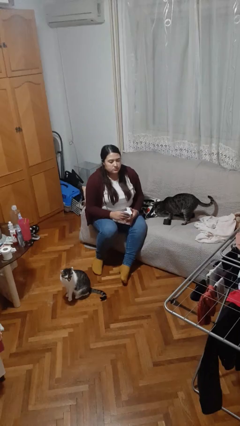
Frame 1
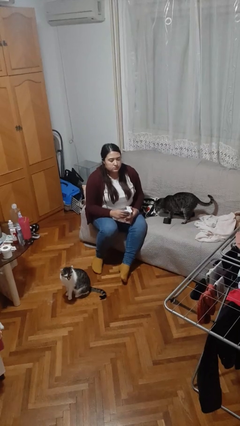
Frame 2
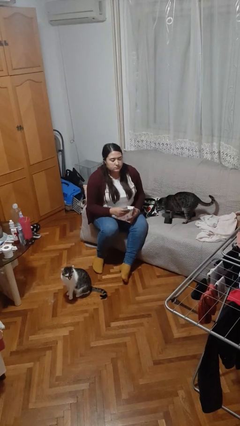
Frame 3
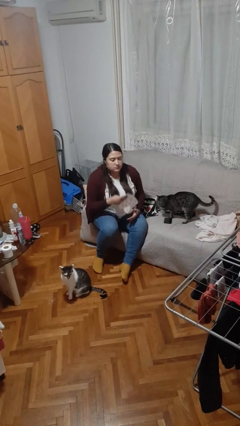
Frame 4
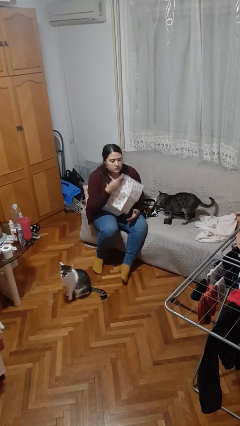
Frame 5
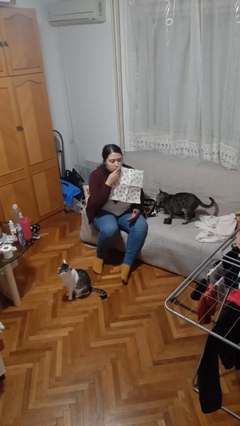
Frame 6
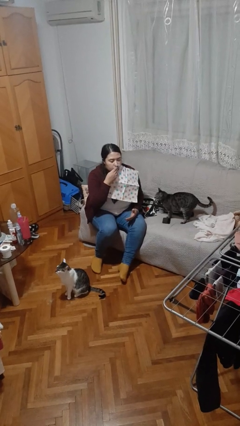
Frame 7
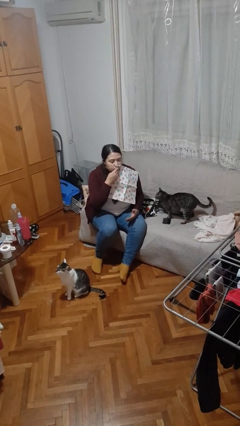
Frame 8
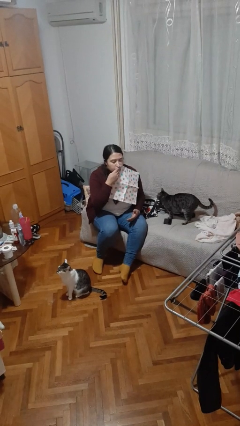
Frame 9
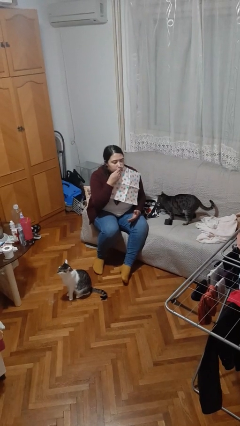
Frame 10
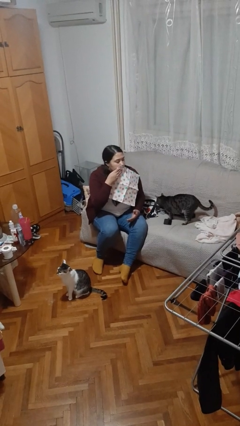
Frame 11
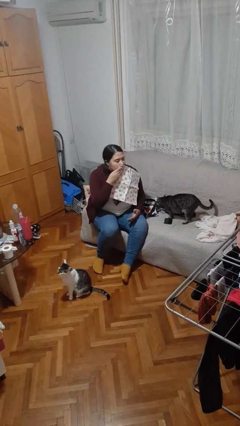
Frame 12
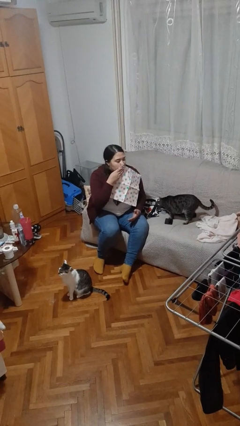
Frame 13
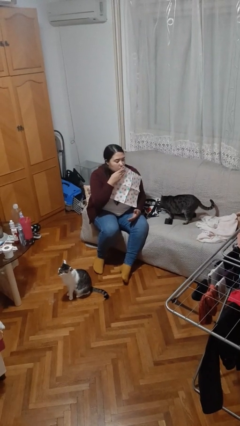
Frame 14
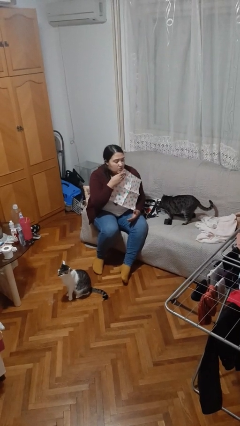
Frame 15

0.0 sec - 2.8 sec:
person wipes mouth with napkin

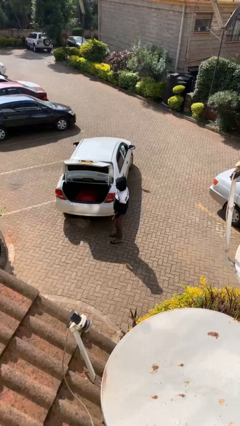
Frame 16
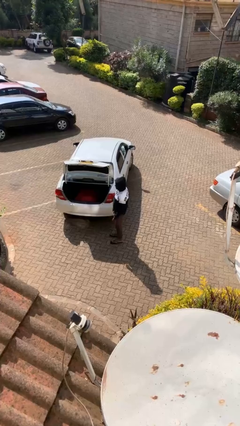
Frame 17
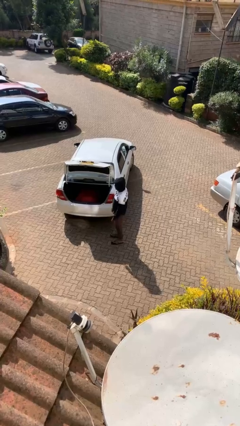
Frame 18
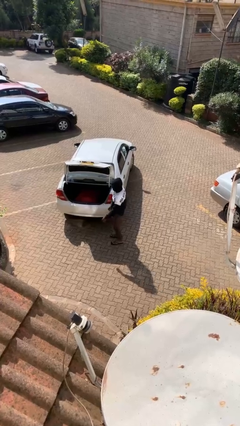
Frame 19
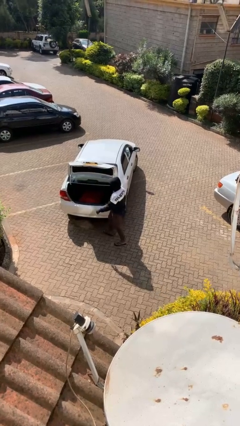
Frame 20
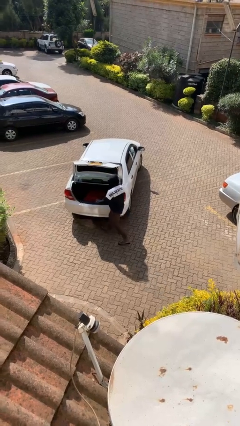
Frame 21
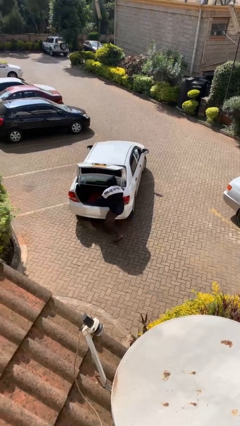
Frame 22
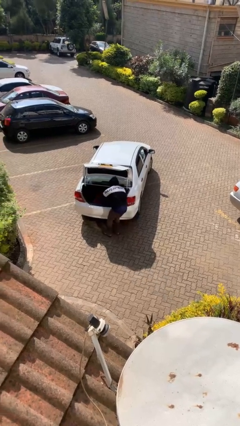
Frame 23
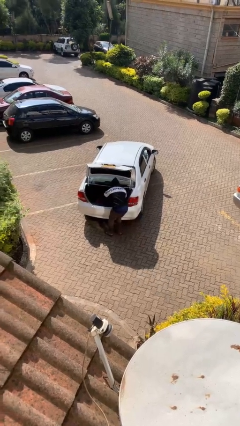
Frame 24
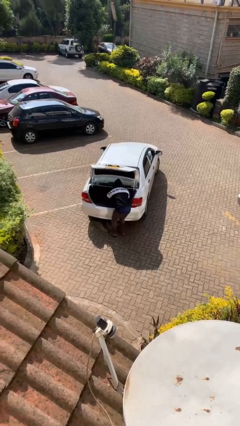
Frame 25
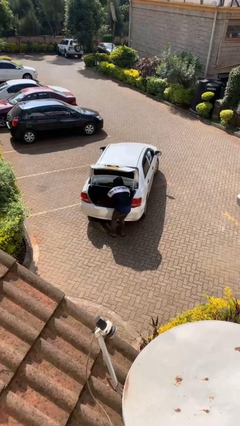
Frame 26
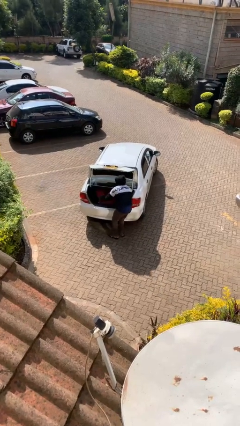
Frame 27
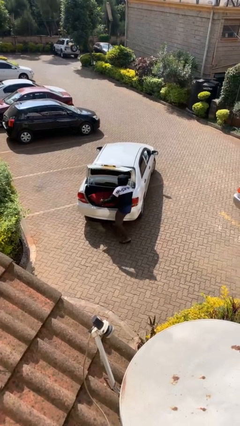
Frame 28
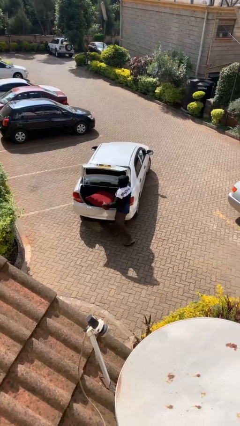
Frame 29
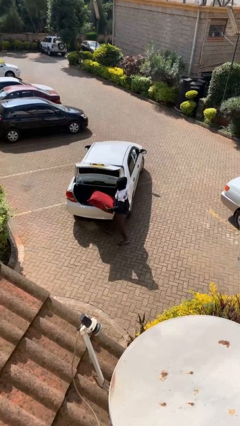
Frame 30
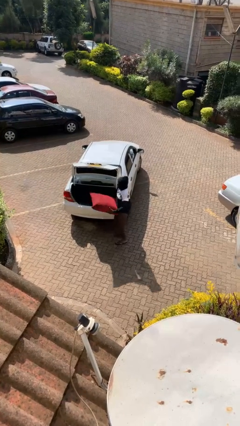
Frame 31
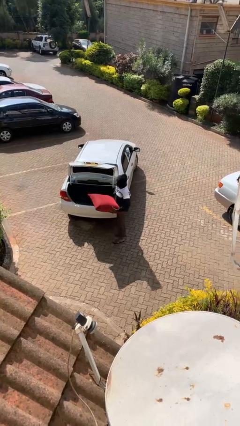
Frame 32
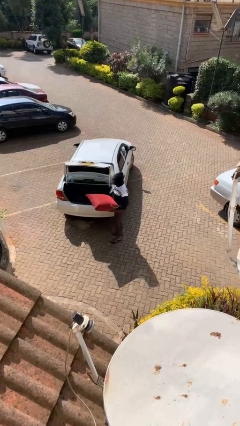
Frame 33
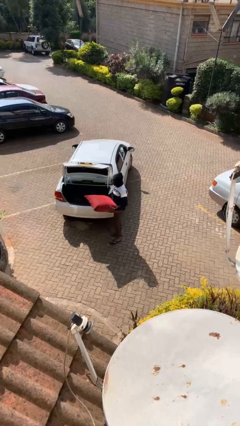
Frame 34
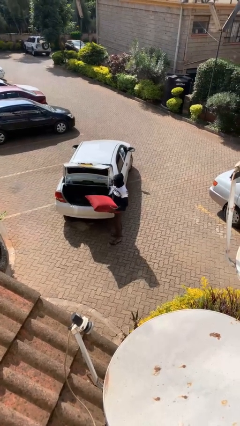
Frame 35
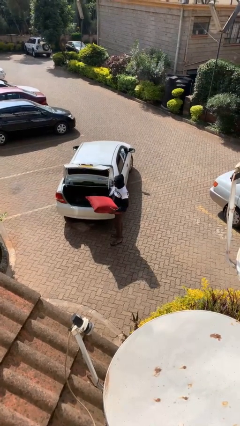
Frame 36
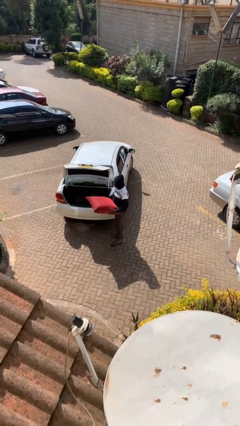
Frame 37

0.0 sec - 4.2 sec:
person unloads car

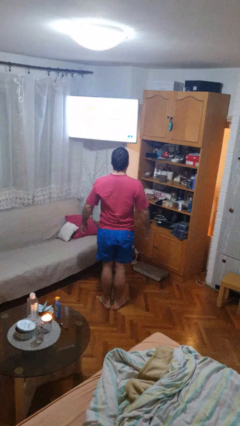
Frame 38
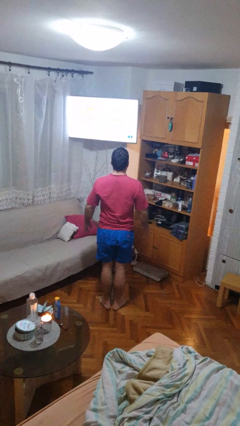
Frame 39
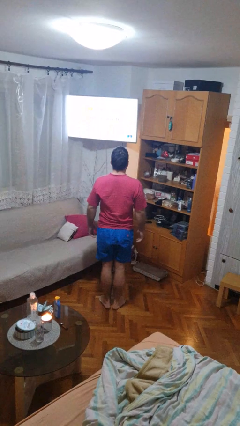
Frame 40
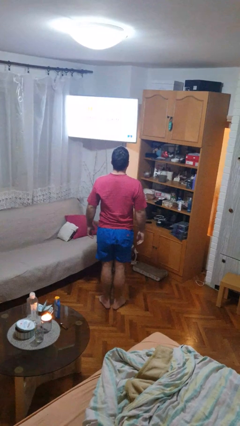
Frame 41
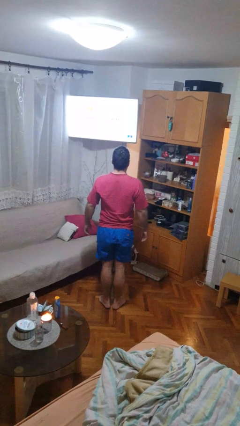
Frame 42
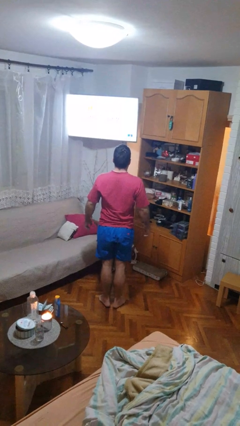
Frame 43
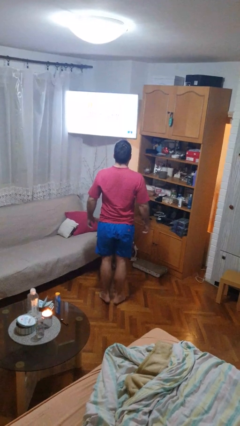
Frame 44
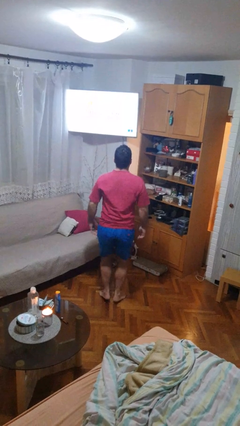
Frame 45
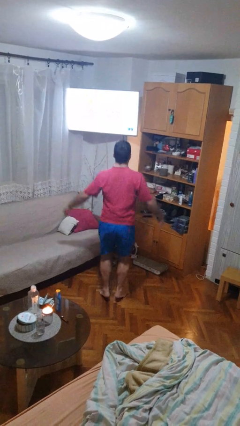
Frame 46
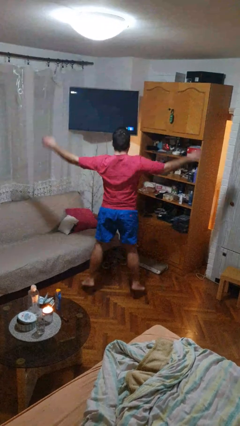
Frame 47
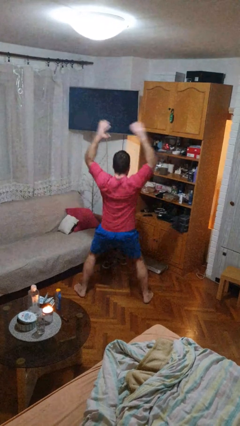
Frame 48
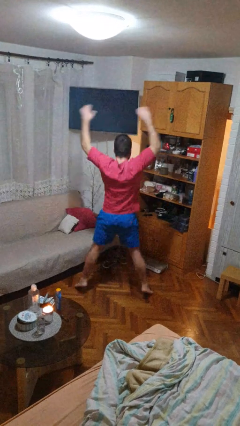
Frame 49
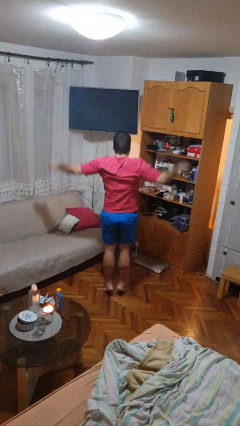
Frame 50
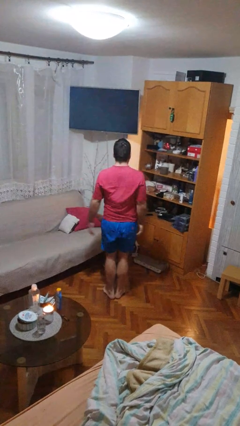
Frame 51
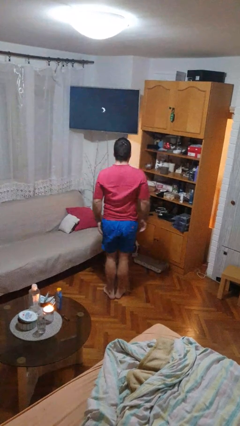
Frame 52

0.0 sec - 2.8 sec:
person exercises with jumping jacks

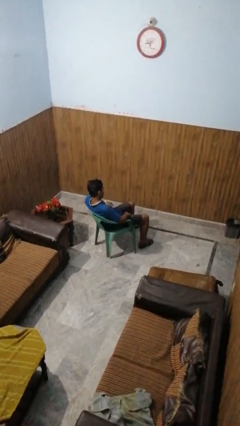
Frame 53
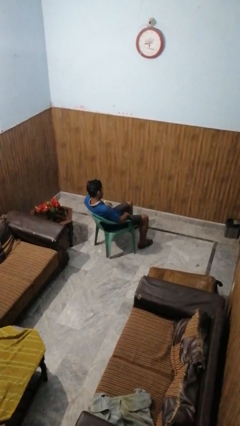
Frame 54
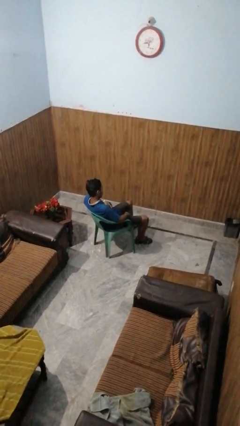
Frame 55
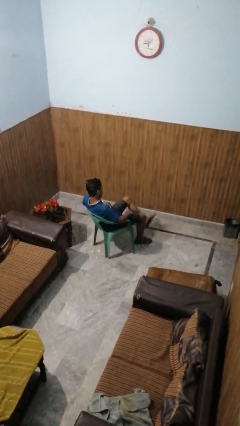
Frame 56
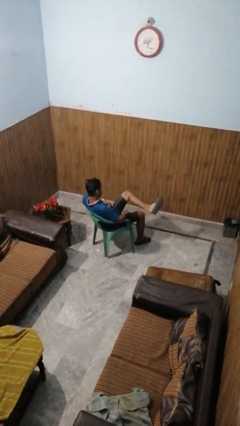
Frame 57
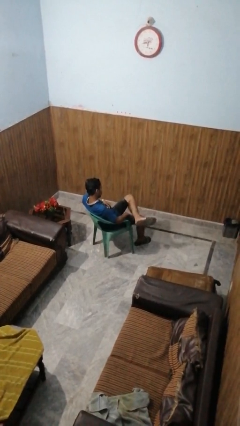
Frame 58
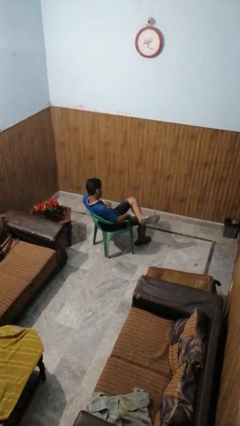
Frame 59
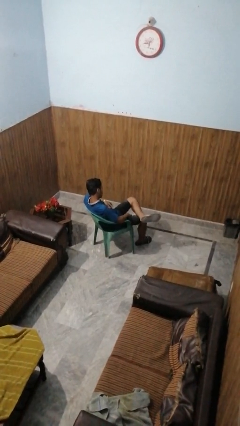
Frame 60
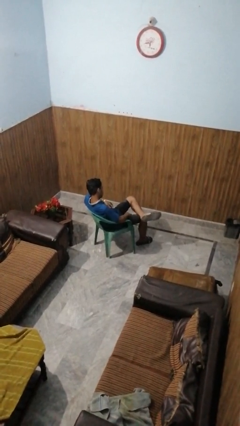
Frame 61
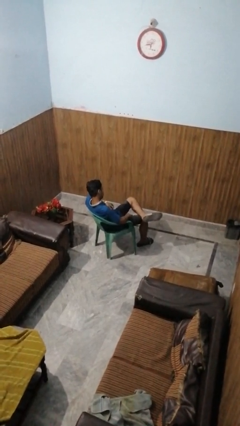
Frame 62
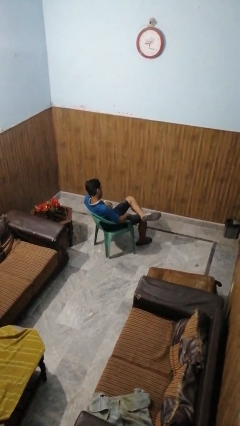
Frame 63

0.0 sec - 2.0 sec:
person crosses legs

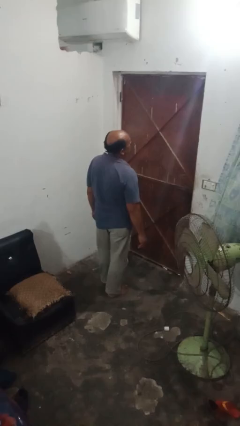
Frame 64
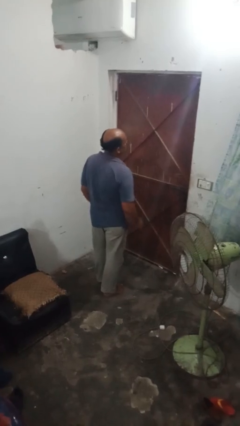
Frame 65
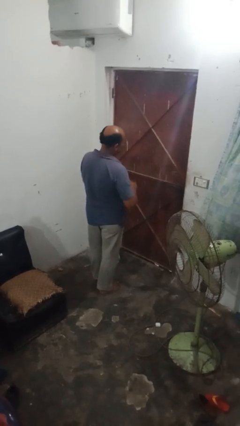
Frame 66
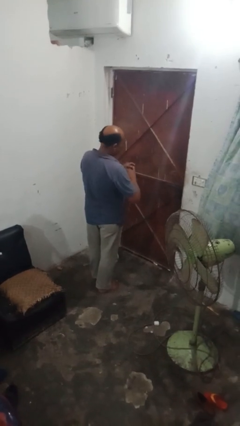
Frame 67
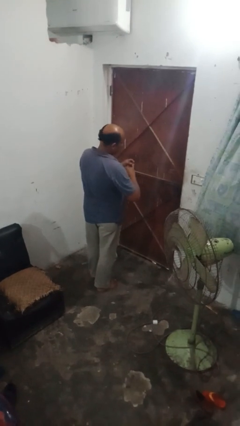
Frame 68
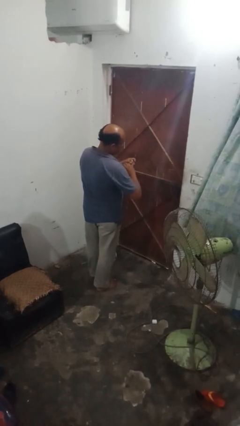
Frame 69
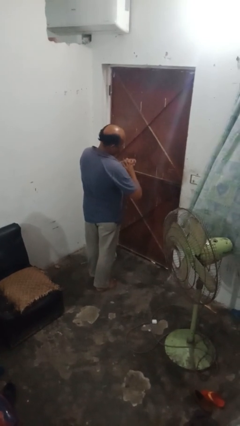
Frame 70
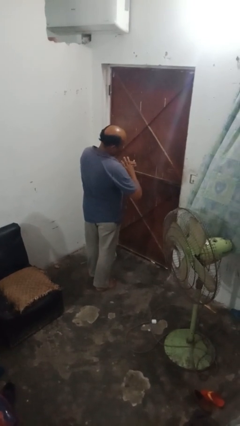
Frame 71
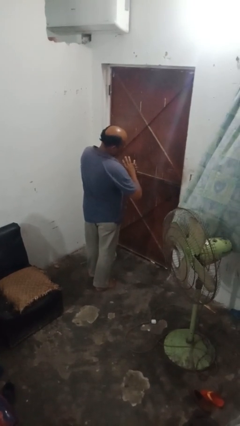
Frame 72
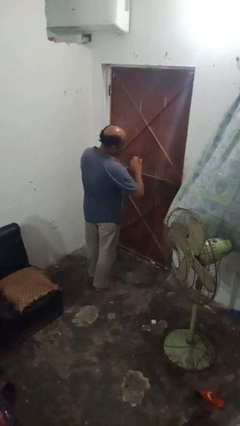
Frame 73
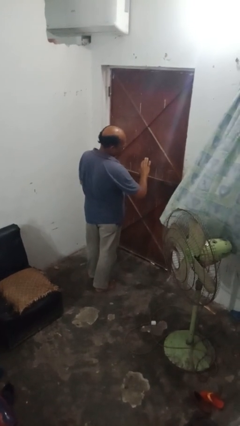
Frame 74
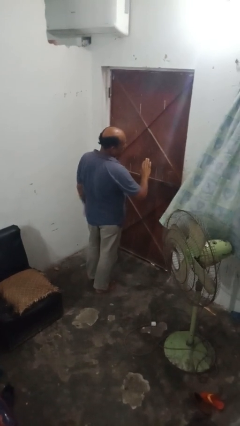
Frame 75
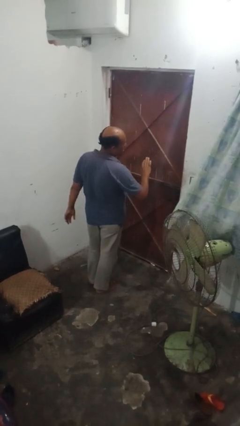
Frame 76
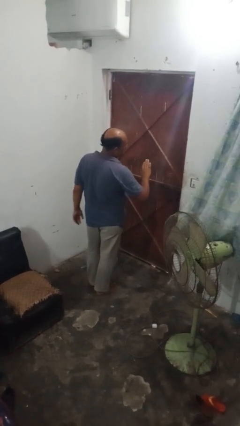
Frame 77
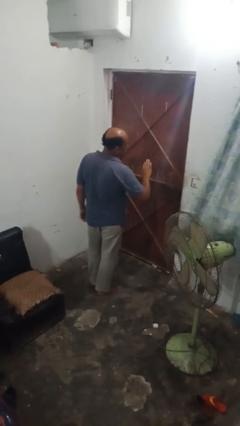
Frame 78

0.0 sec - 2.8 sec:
person puts on ring

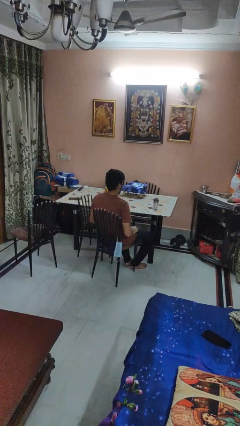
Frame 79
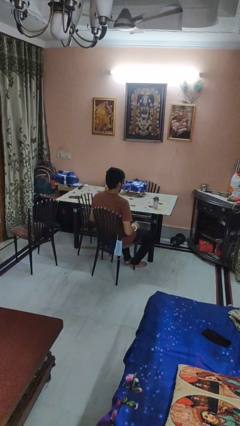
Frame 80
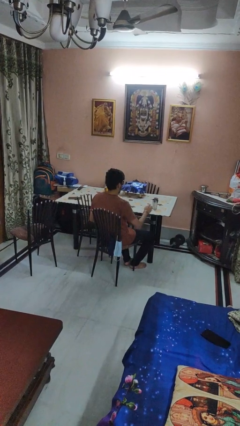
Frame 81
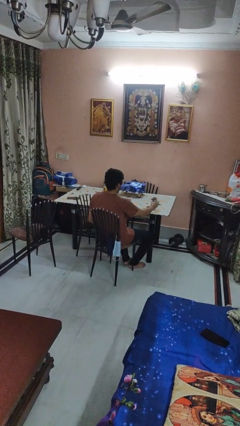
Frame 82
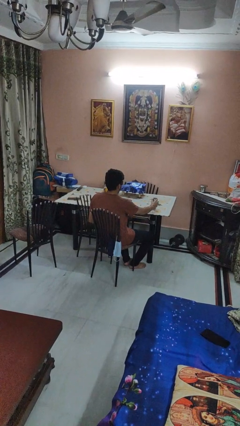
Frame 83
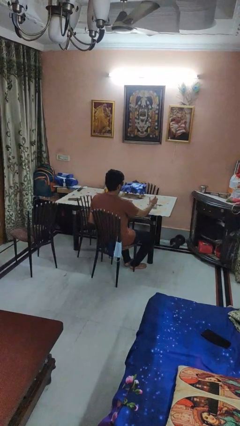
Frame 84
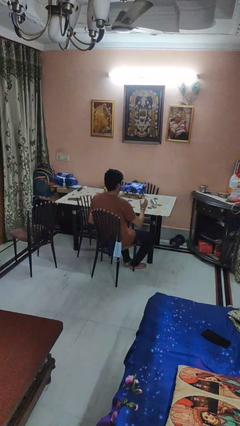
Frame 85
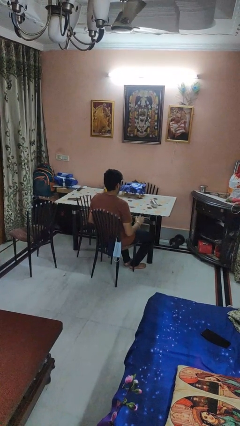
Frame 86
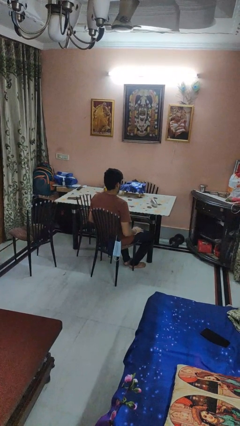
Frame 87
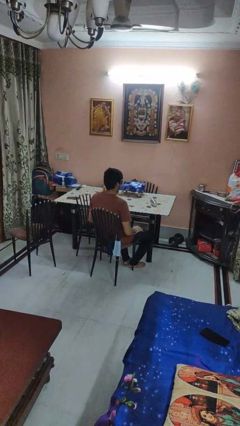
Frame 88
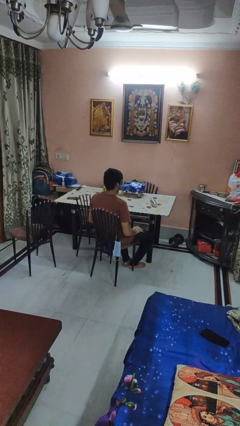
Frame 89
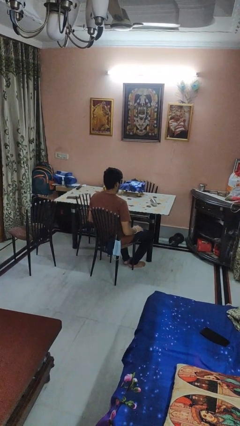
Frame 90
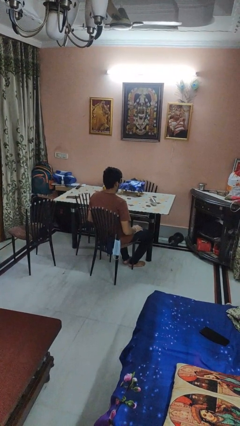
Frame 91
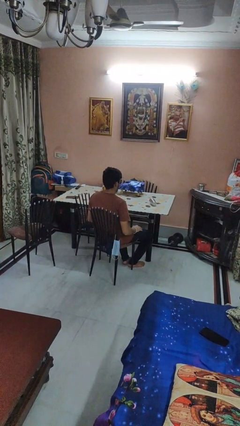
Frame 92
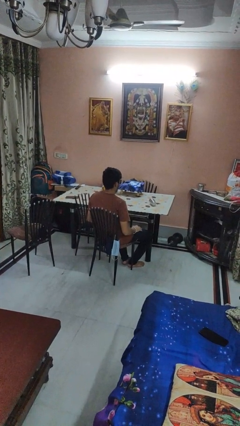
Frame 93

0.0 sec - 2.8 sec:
person knocks over glass
